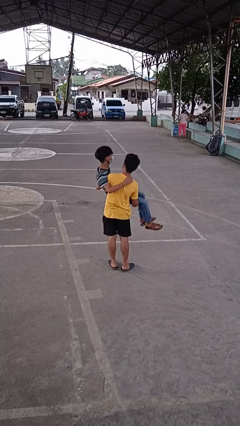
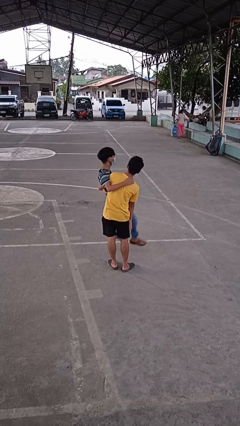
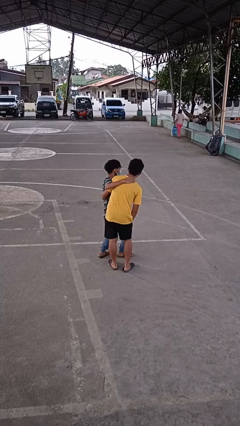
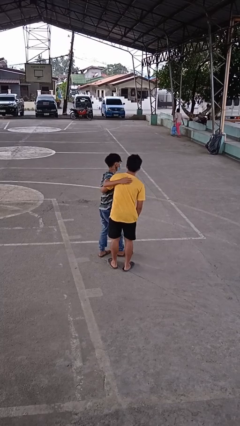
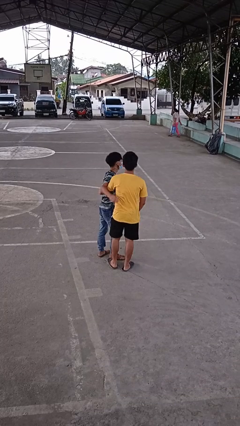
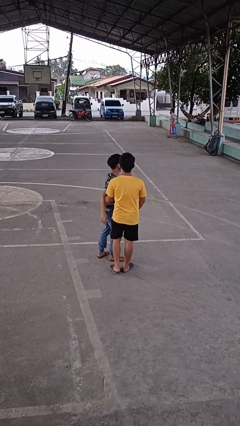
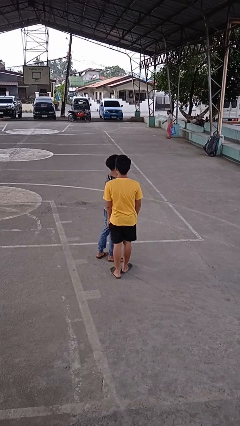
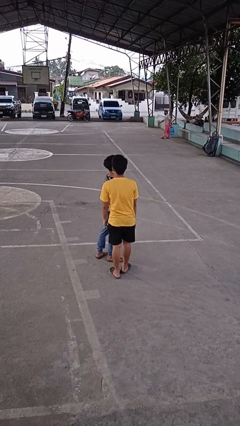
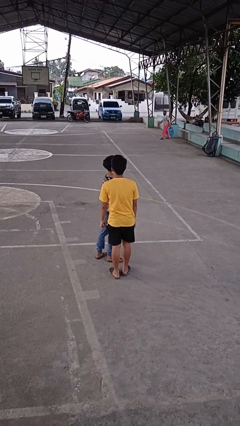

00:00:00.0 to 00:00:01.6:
person puts down person

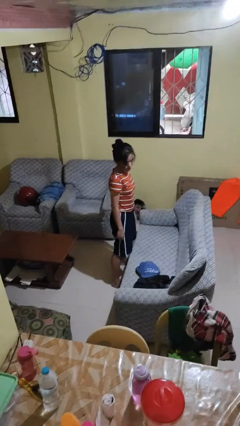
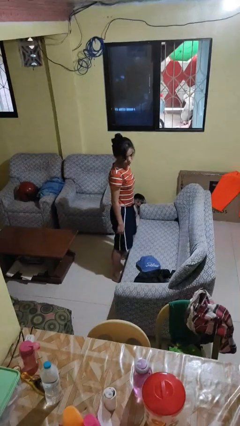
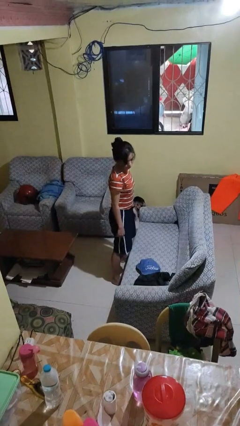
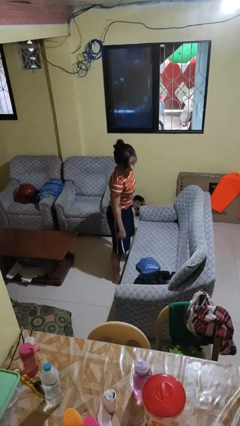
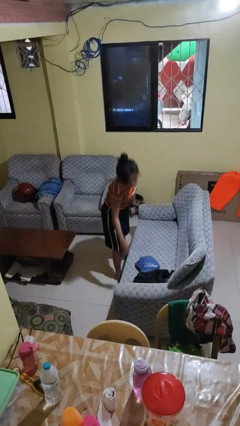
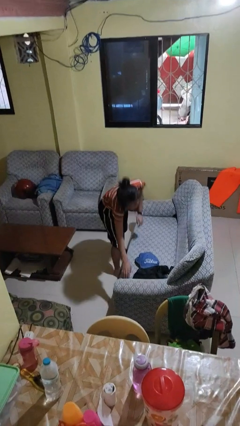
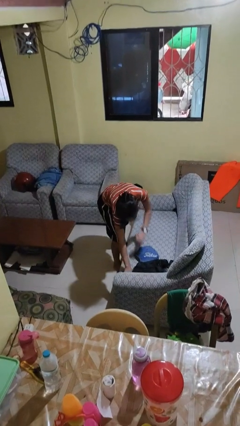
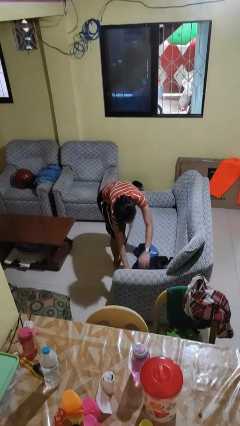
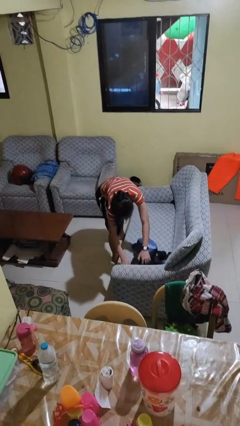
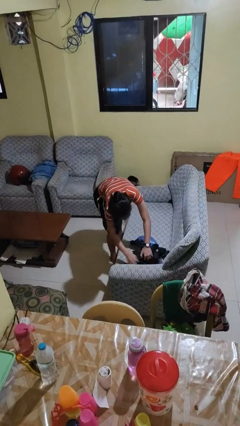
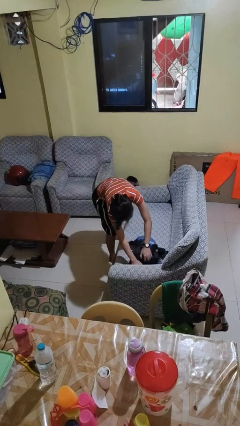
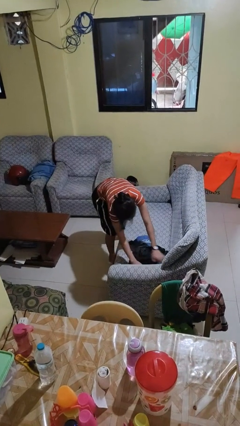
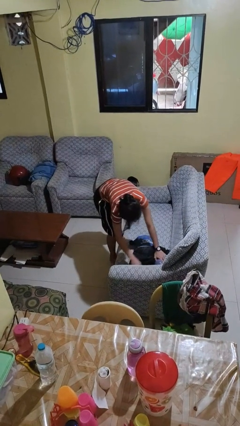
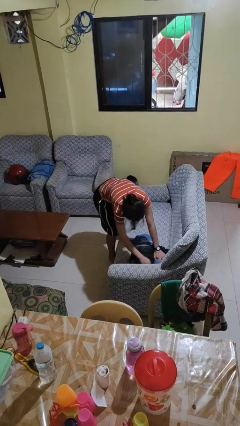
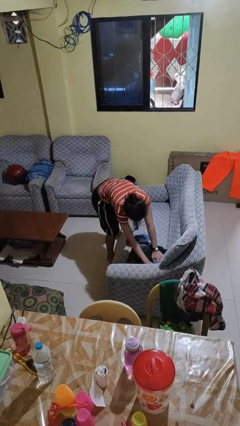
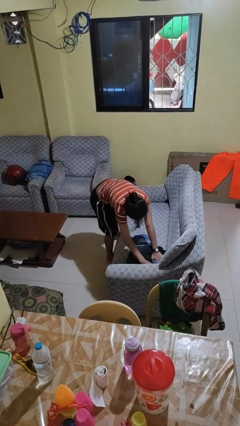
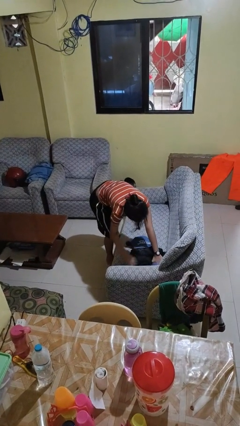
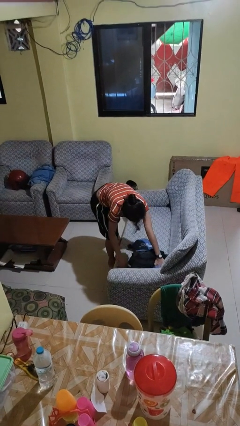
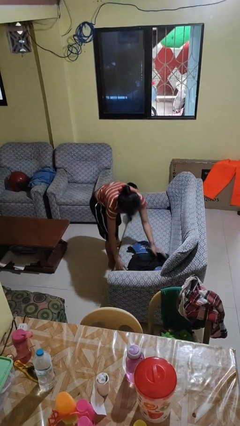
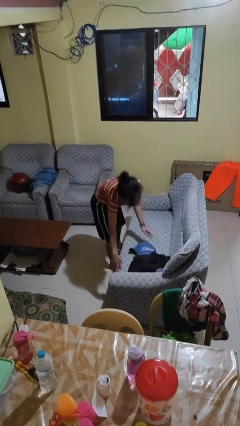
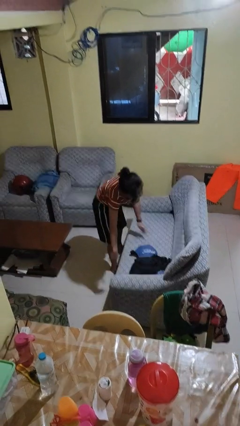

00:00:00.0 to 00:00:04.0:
person searches in couch

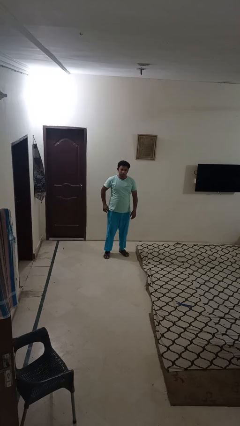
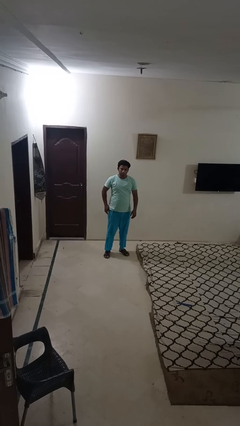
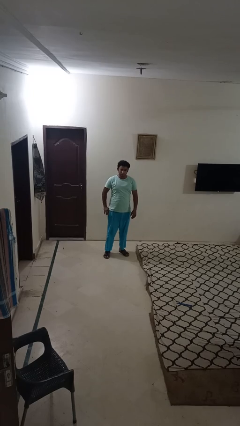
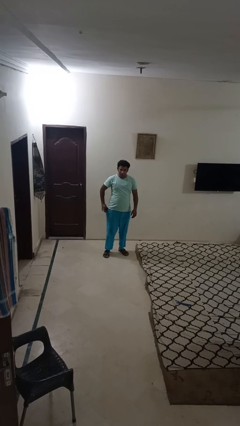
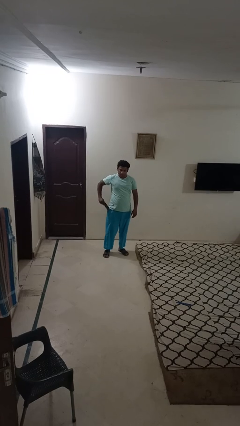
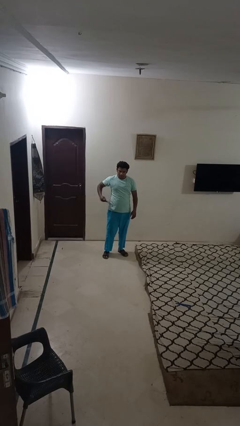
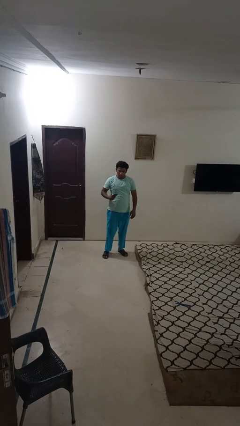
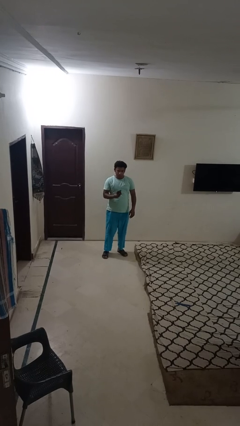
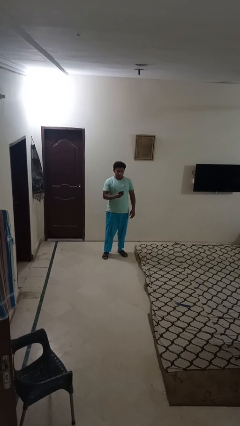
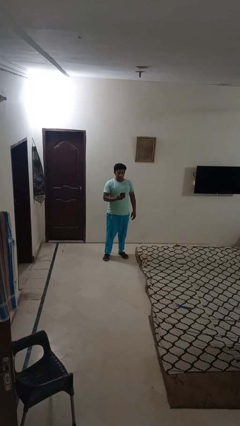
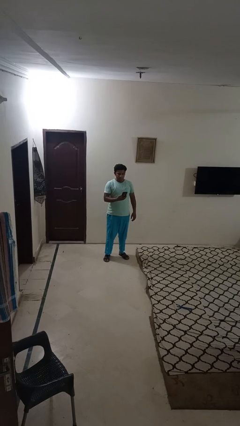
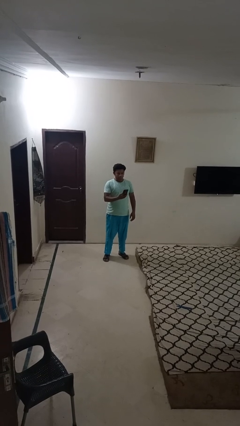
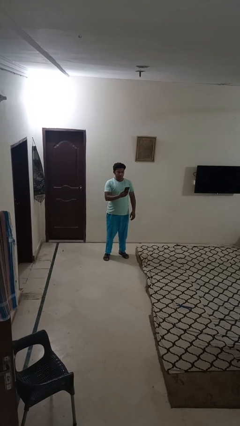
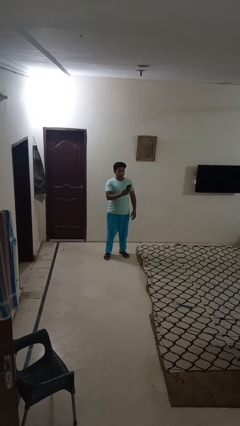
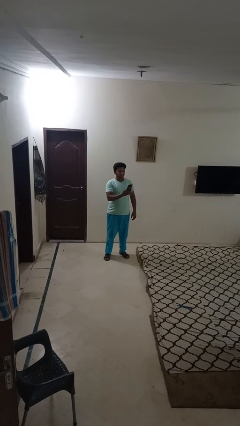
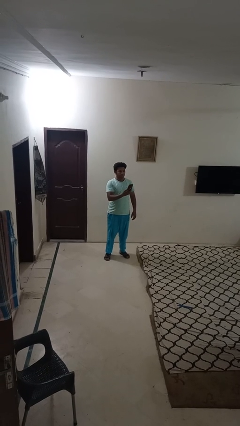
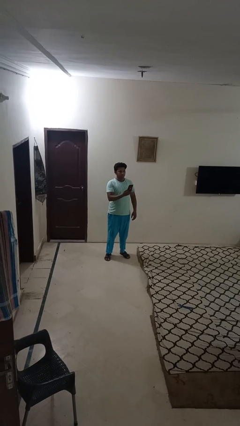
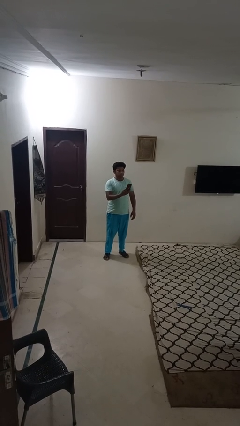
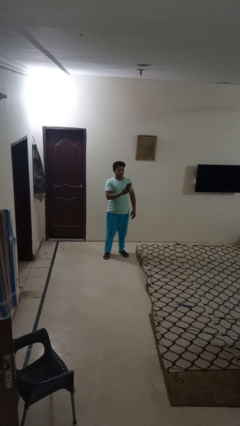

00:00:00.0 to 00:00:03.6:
person takes phone from pocket

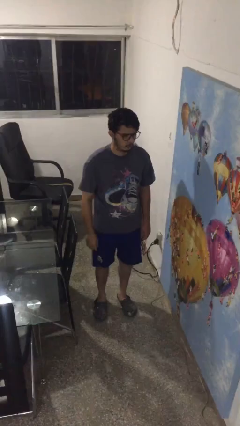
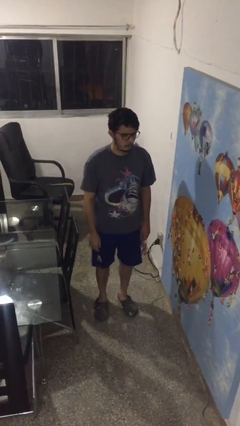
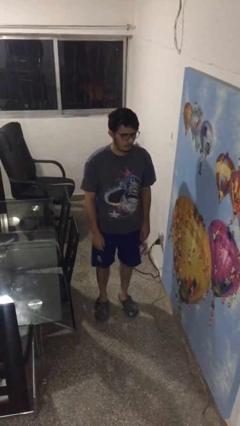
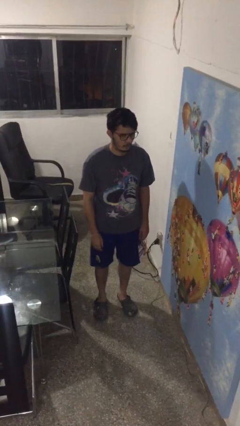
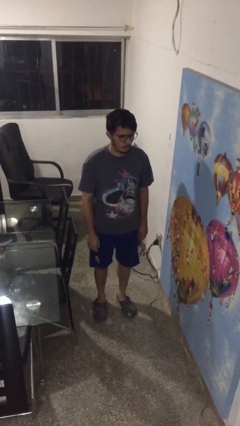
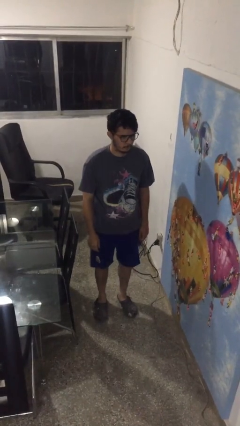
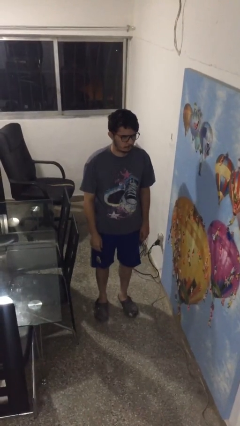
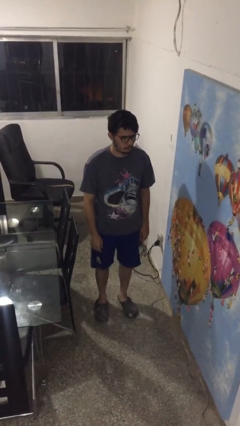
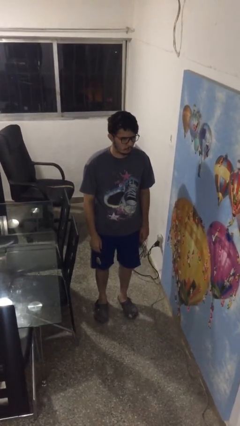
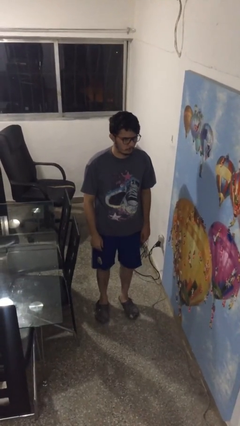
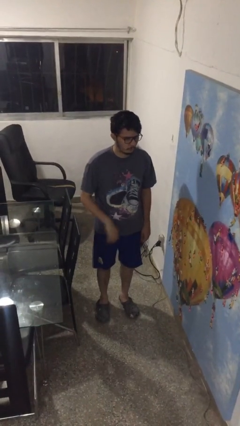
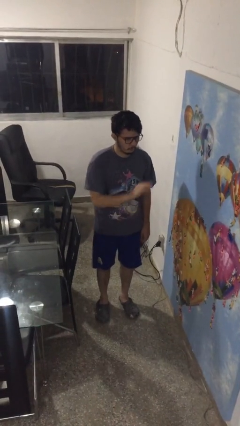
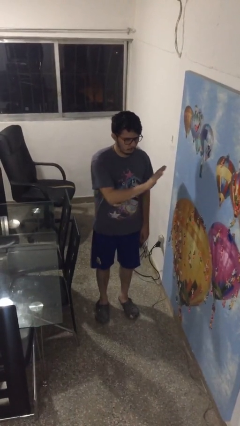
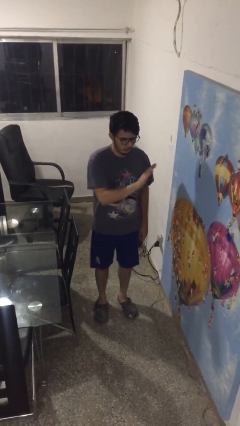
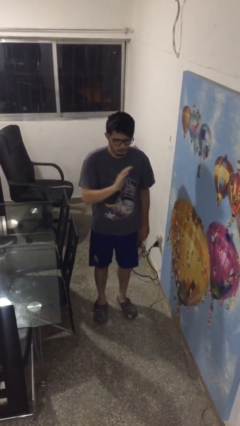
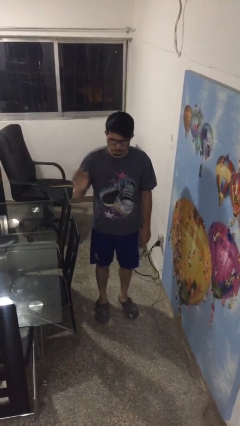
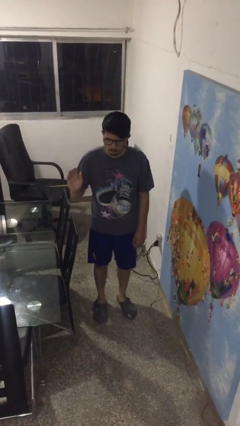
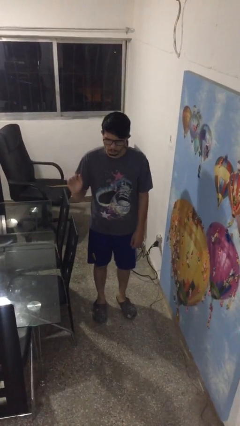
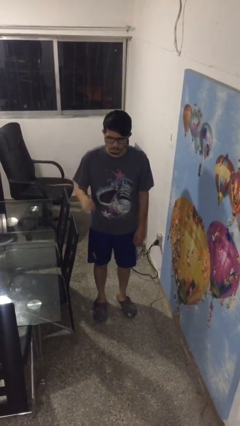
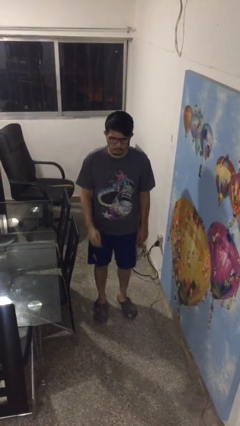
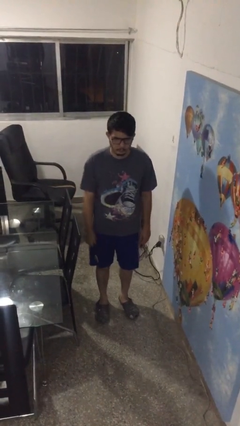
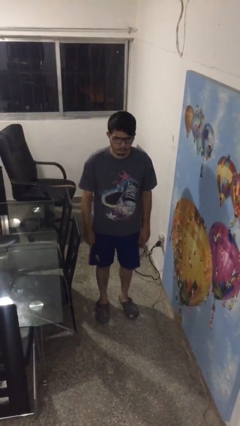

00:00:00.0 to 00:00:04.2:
person gestures swipe right

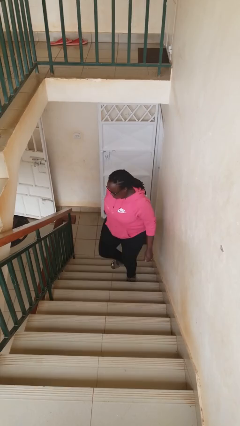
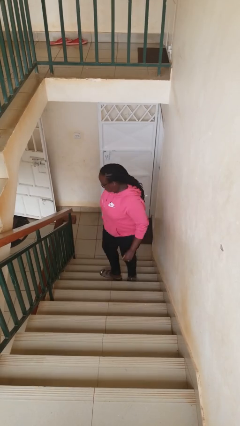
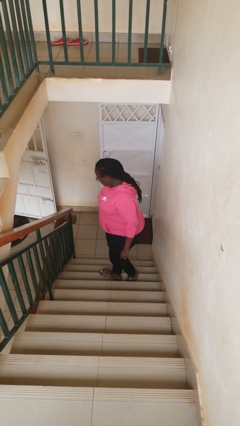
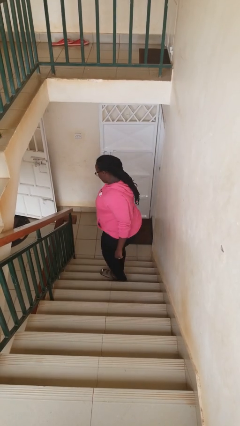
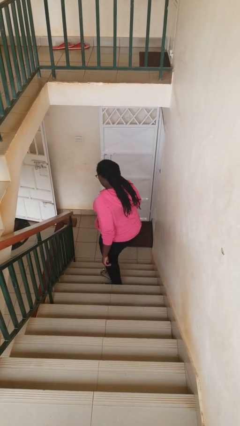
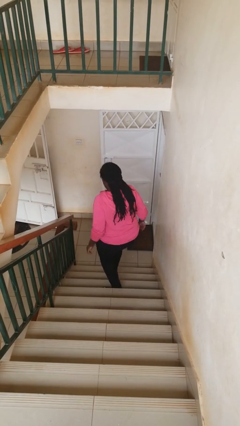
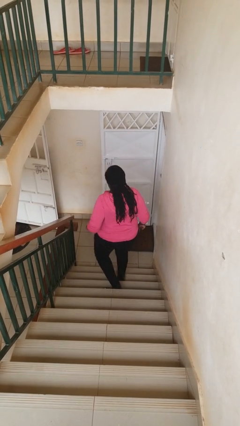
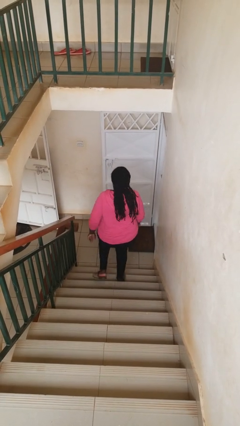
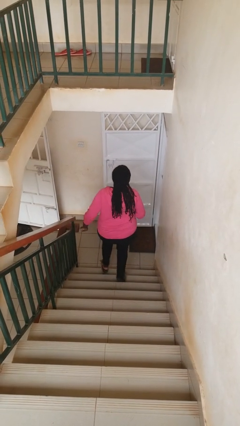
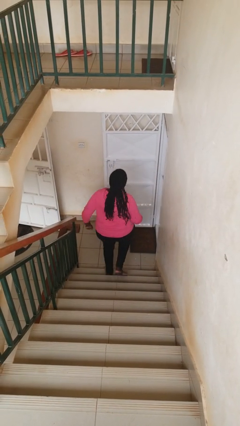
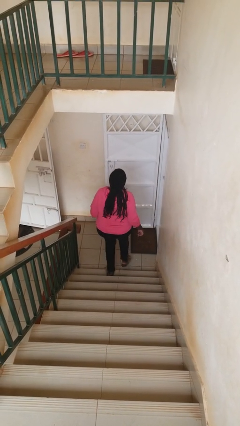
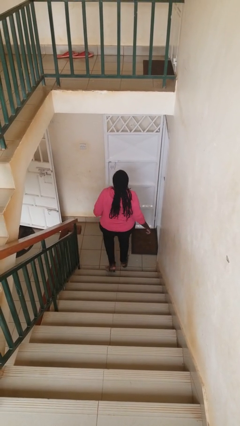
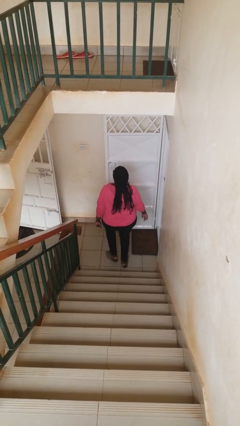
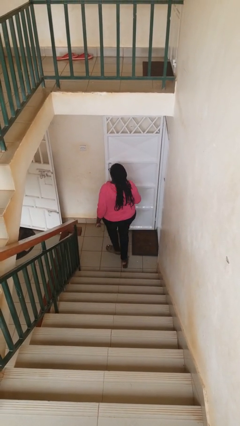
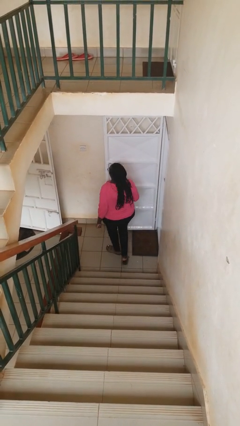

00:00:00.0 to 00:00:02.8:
person climbs down stairs

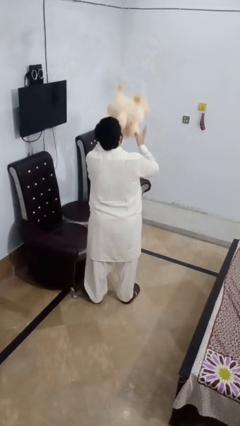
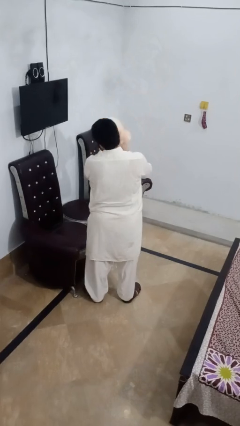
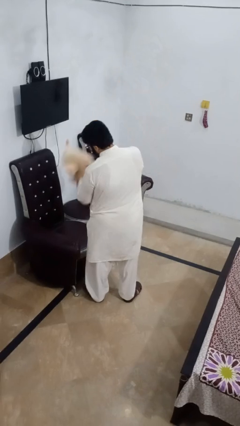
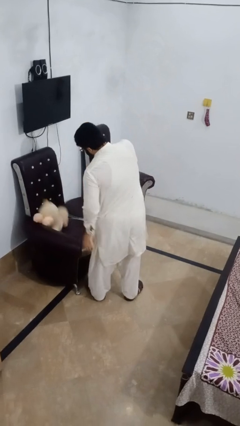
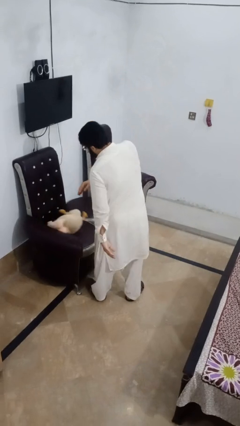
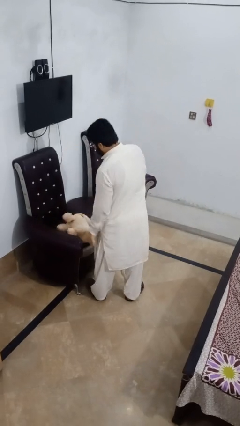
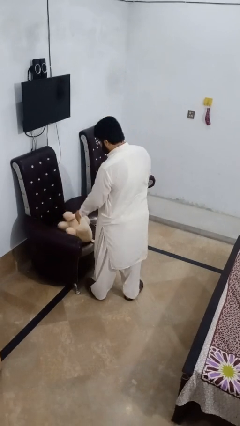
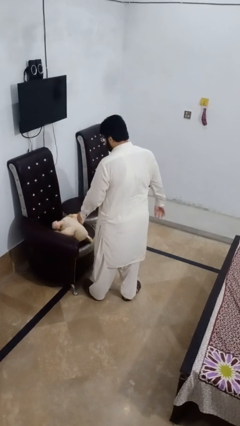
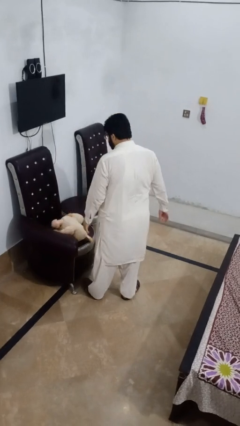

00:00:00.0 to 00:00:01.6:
person puts down object on couch
